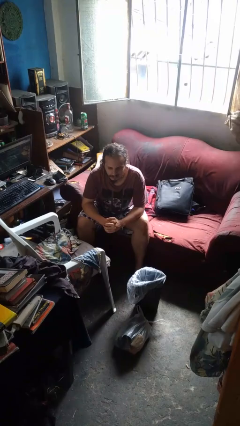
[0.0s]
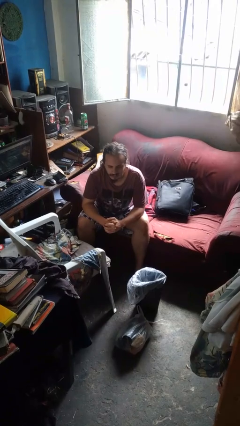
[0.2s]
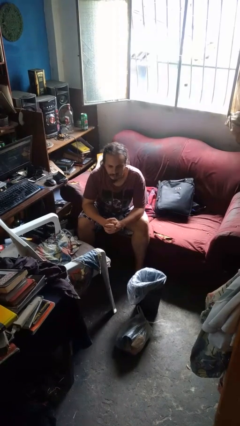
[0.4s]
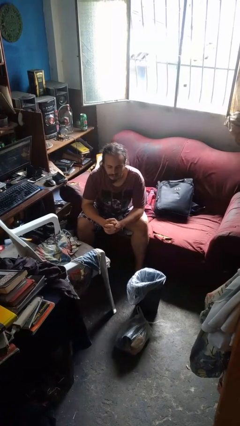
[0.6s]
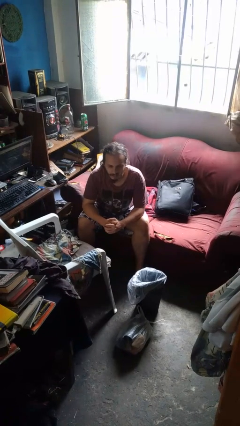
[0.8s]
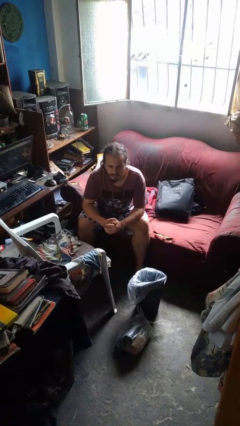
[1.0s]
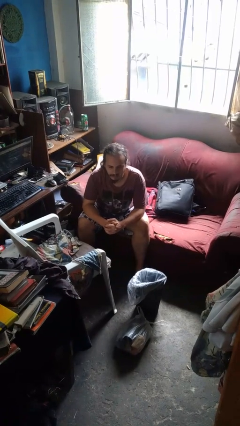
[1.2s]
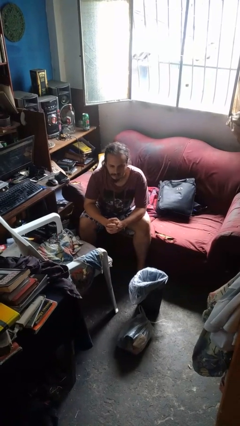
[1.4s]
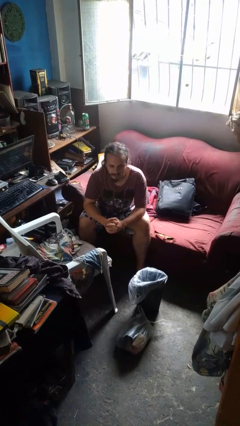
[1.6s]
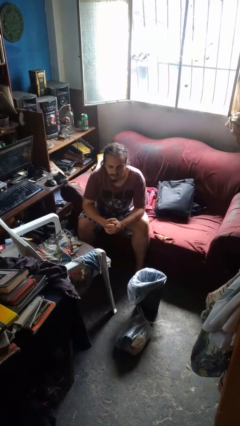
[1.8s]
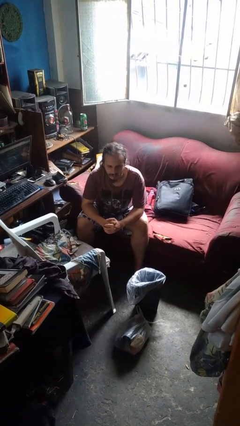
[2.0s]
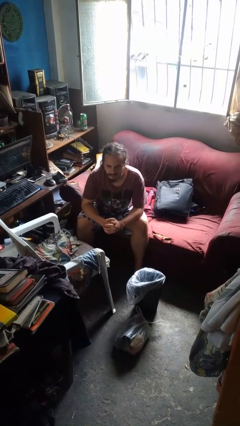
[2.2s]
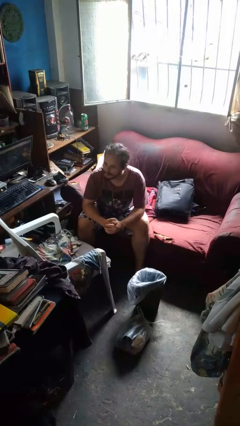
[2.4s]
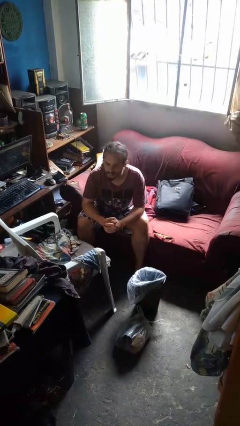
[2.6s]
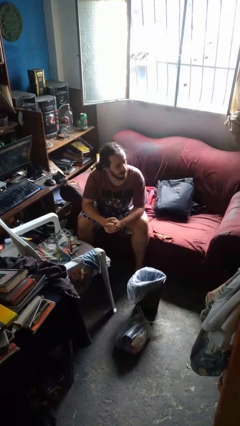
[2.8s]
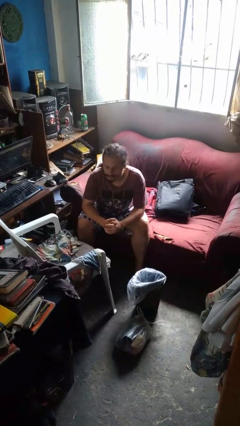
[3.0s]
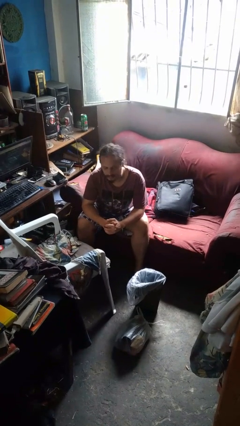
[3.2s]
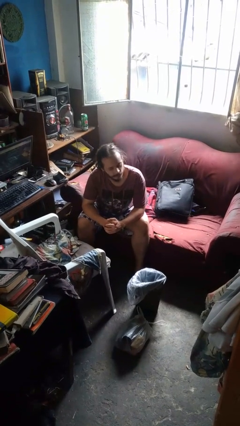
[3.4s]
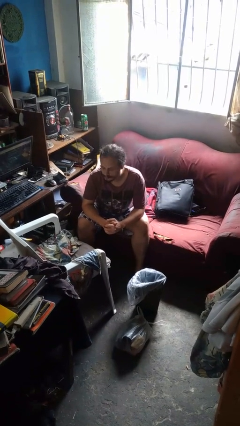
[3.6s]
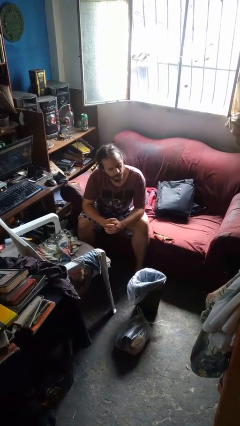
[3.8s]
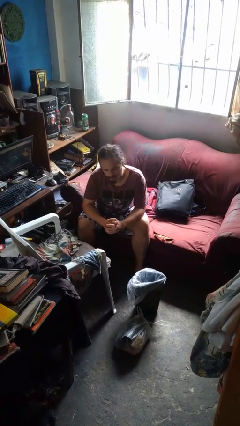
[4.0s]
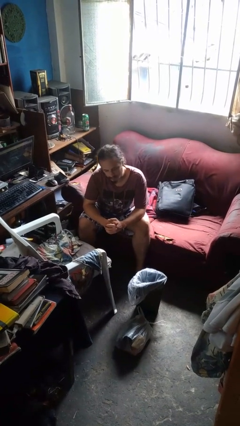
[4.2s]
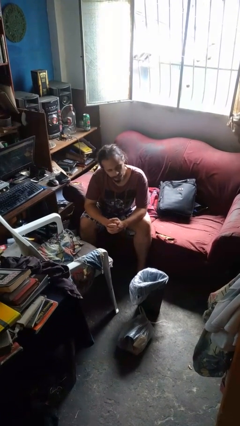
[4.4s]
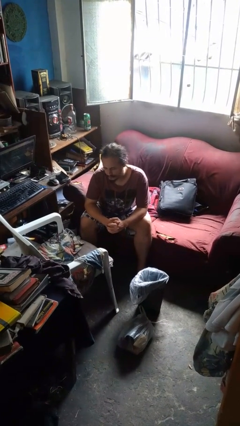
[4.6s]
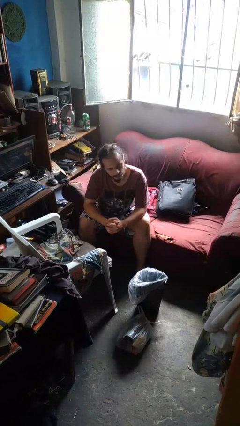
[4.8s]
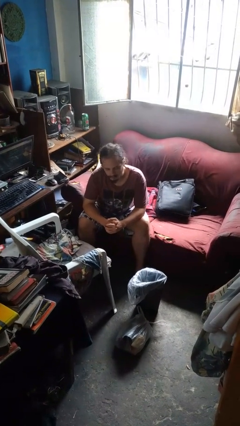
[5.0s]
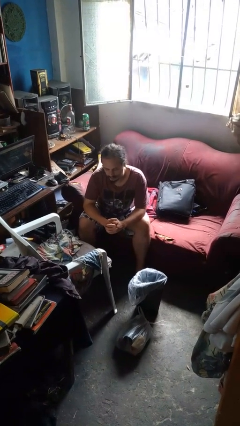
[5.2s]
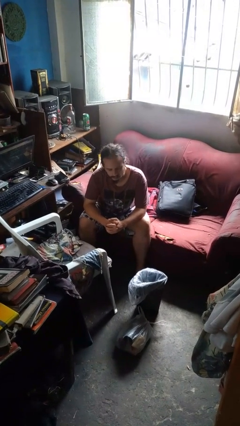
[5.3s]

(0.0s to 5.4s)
person shakes head

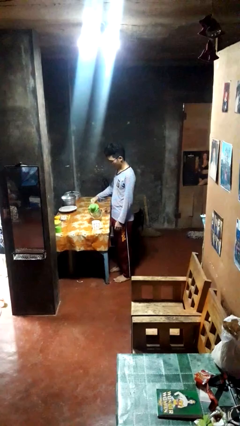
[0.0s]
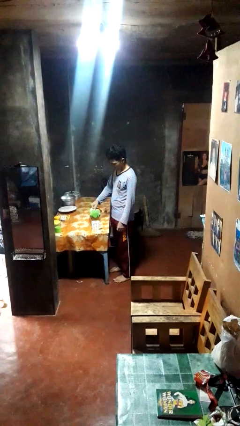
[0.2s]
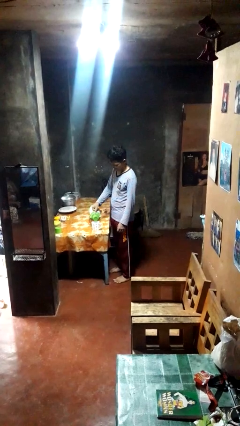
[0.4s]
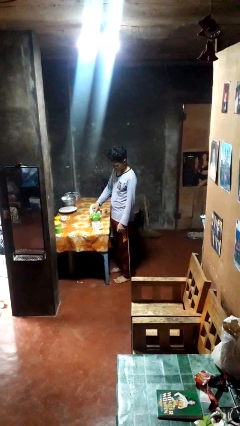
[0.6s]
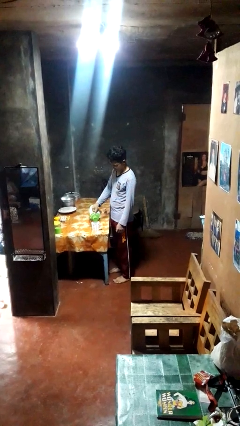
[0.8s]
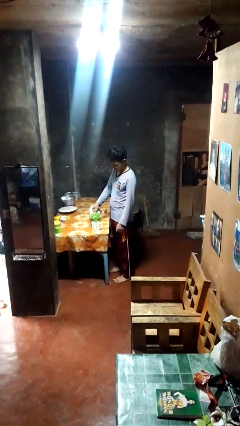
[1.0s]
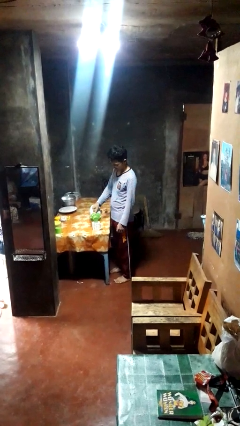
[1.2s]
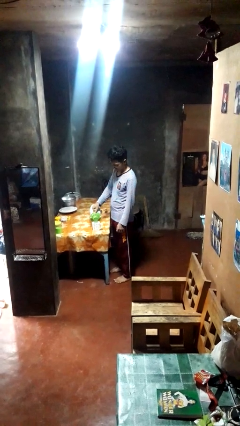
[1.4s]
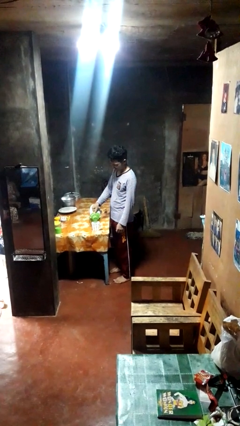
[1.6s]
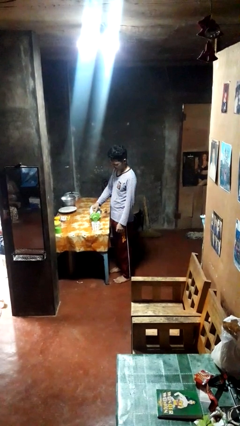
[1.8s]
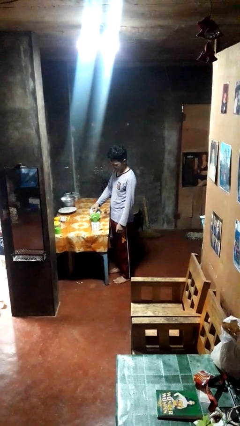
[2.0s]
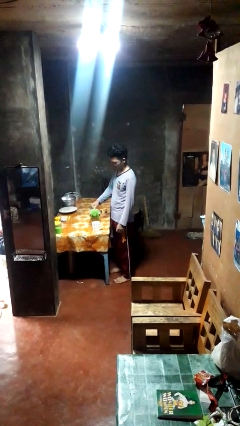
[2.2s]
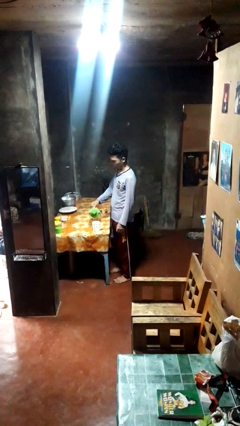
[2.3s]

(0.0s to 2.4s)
person pours coffee into mug

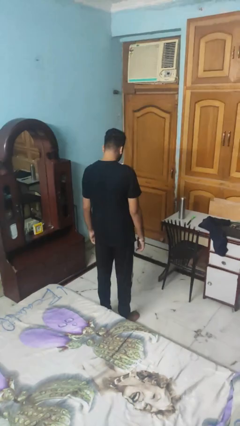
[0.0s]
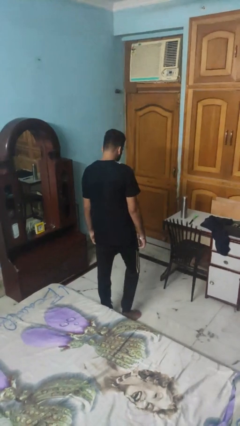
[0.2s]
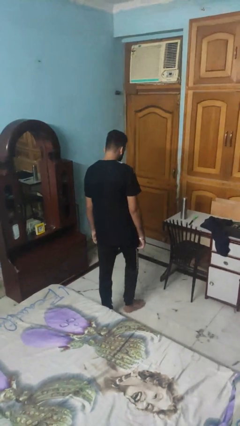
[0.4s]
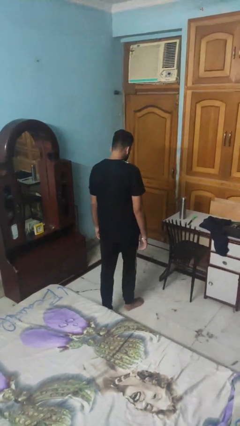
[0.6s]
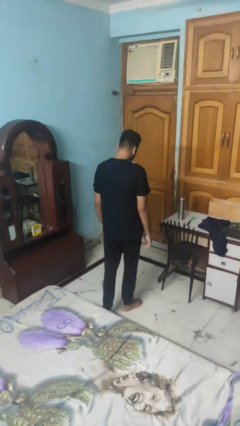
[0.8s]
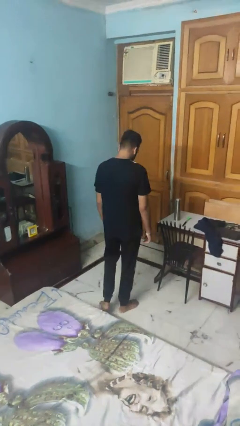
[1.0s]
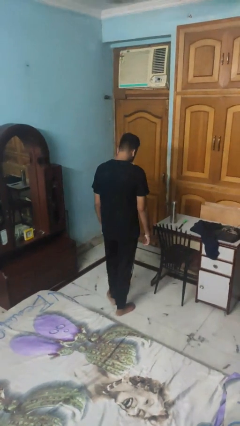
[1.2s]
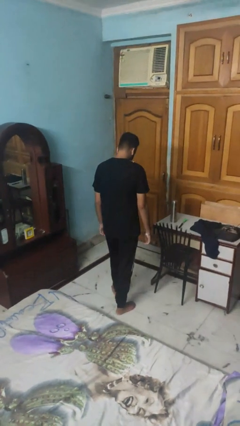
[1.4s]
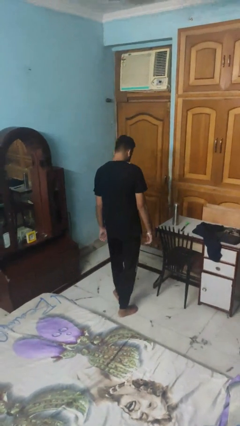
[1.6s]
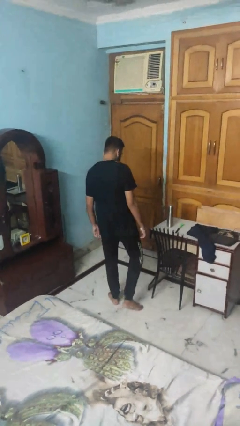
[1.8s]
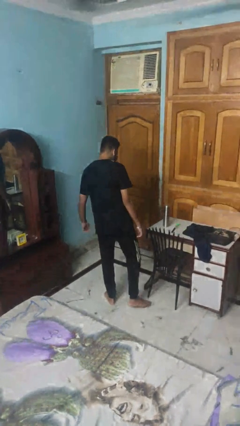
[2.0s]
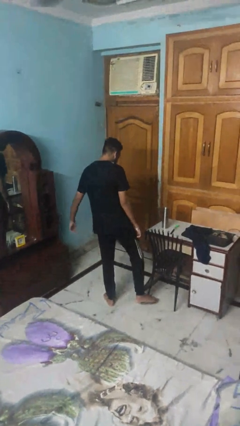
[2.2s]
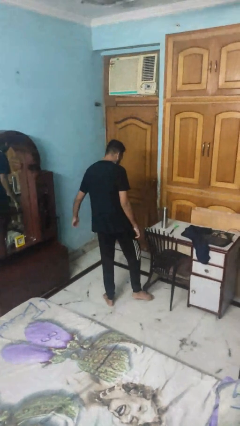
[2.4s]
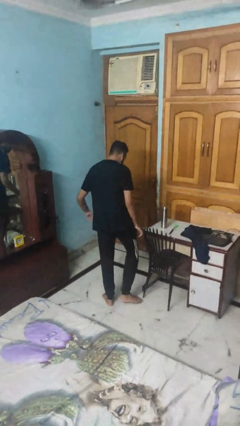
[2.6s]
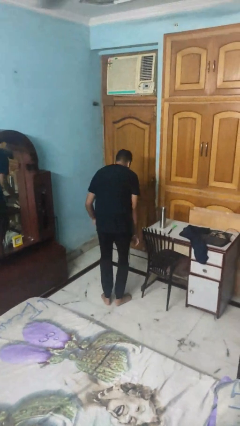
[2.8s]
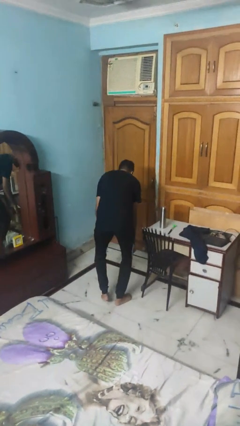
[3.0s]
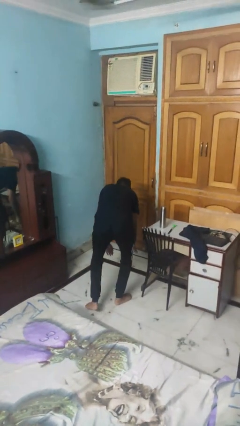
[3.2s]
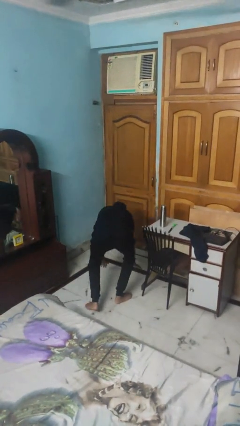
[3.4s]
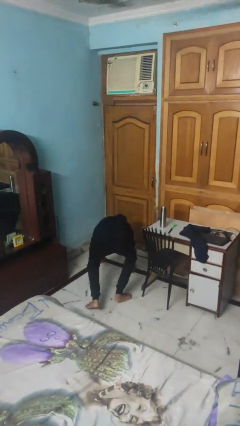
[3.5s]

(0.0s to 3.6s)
person trips on object on floor

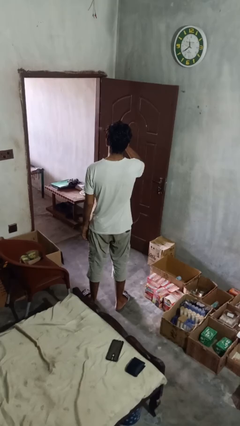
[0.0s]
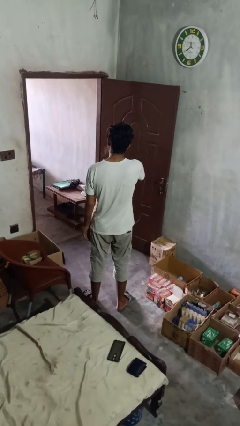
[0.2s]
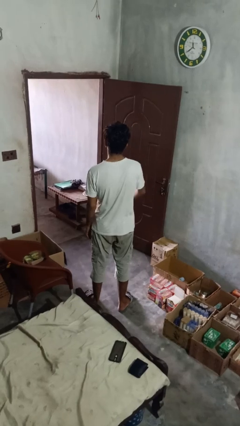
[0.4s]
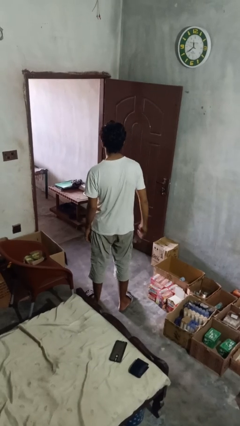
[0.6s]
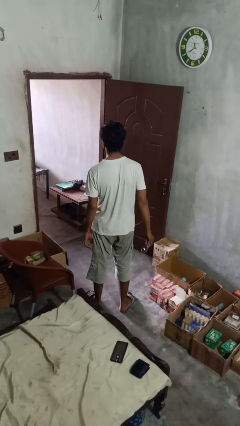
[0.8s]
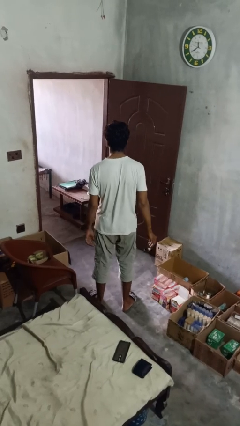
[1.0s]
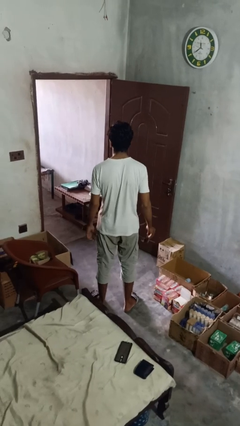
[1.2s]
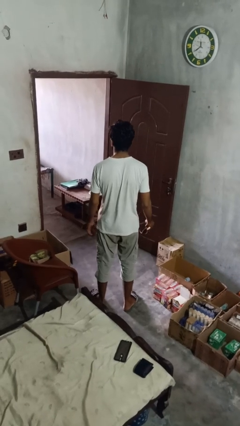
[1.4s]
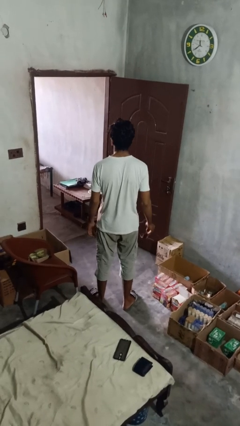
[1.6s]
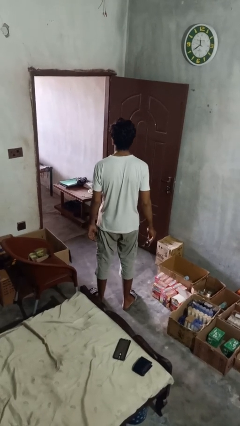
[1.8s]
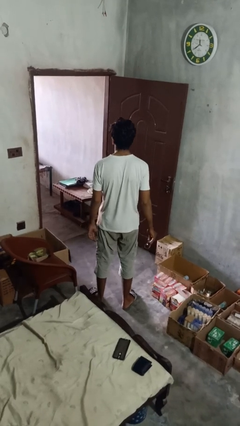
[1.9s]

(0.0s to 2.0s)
person takes off glasses

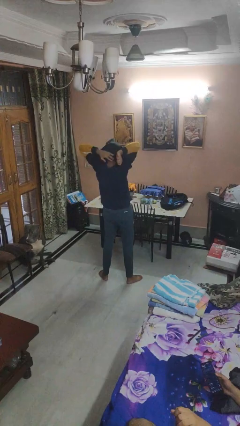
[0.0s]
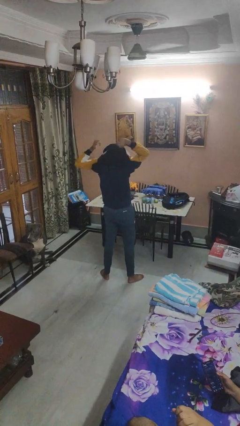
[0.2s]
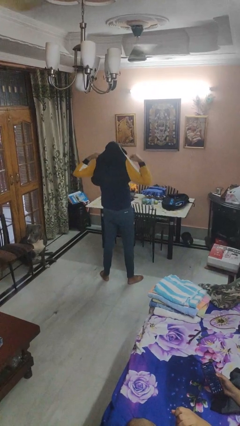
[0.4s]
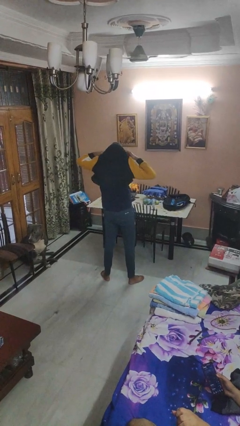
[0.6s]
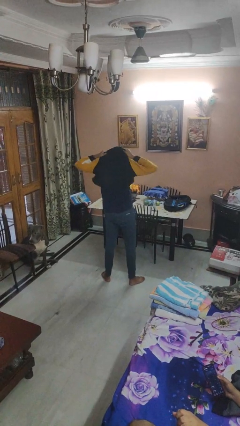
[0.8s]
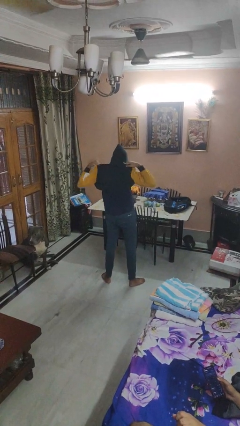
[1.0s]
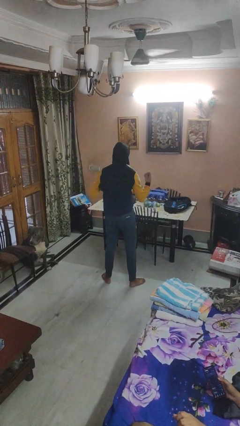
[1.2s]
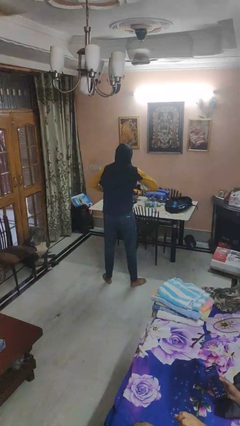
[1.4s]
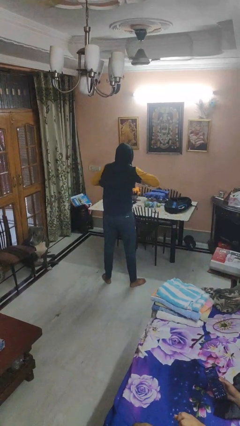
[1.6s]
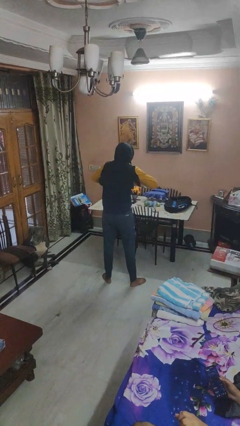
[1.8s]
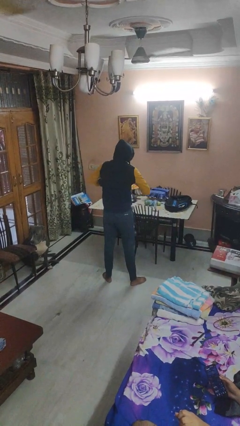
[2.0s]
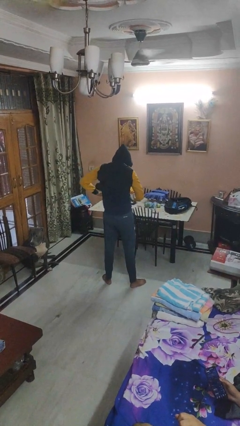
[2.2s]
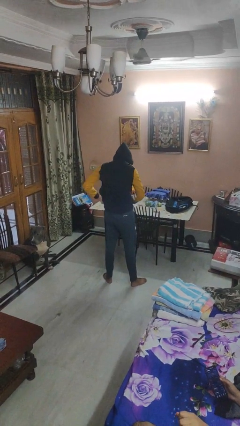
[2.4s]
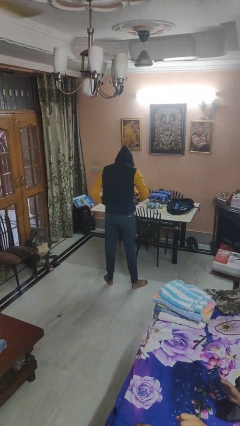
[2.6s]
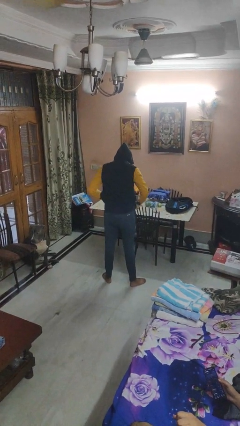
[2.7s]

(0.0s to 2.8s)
person puts on hoodie

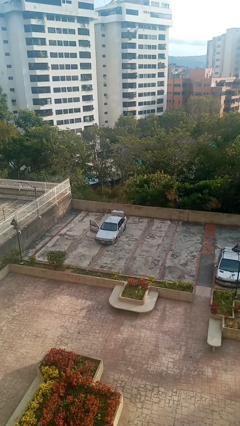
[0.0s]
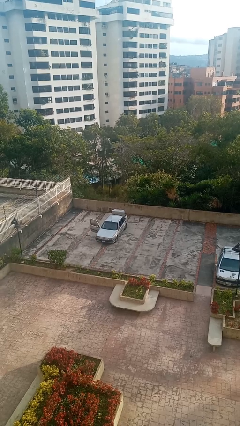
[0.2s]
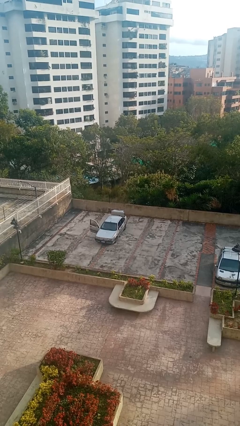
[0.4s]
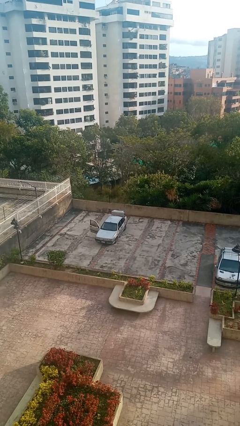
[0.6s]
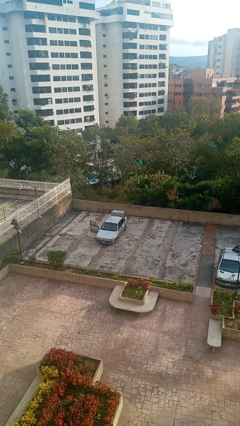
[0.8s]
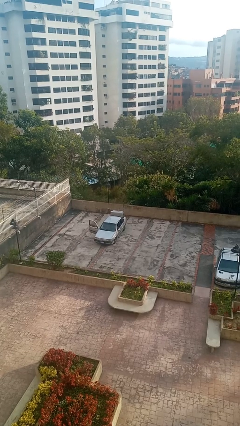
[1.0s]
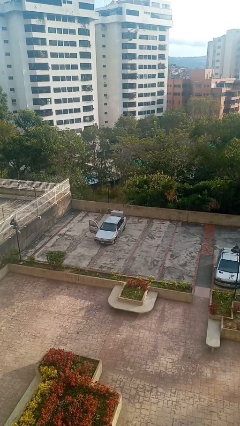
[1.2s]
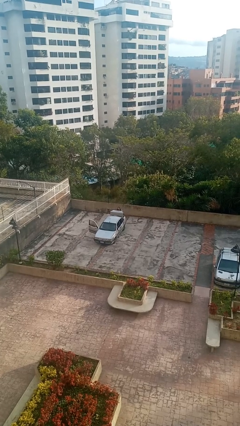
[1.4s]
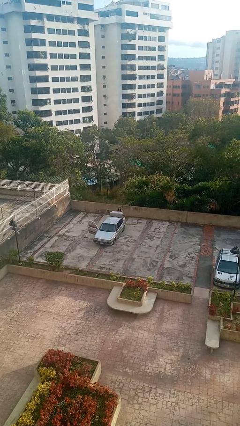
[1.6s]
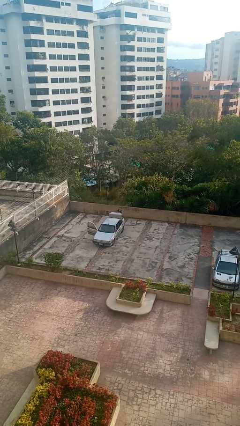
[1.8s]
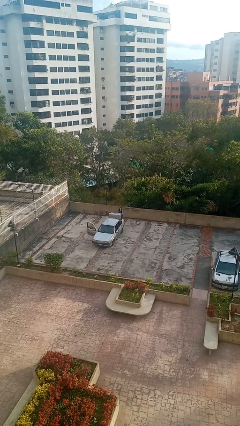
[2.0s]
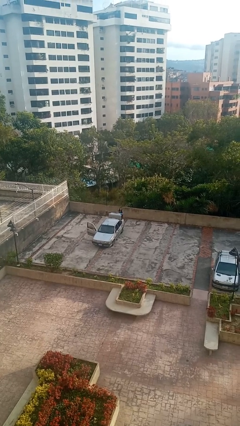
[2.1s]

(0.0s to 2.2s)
person unloads car
